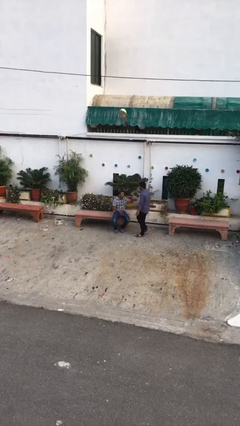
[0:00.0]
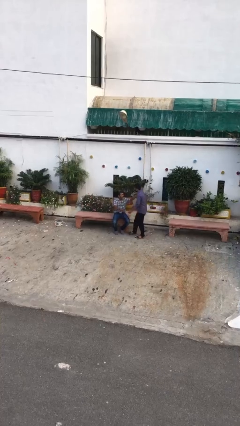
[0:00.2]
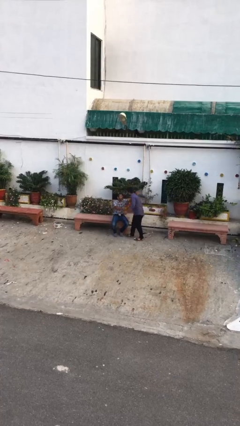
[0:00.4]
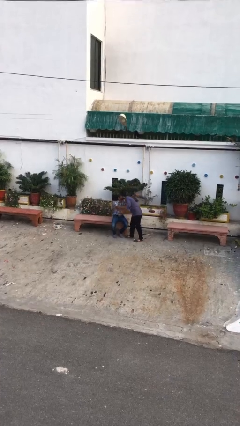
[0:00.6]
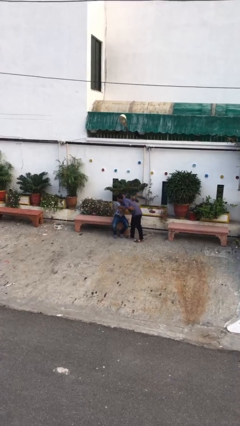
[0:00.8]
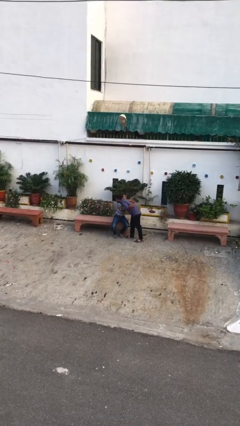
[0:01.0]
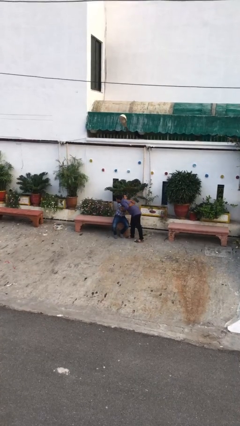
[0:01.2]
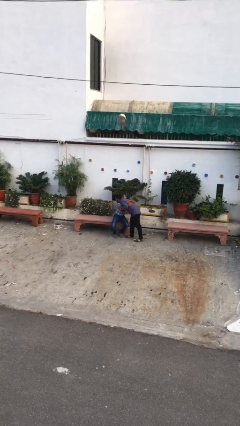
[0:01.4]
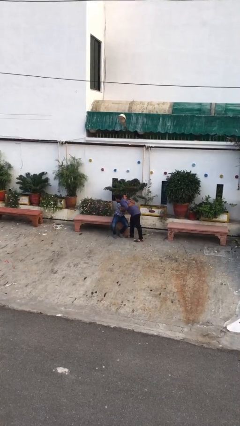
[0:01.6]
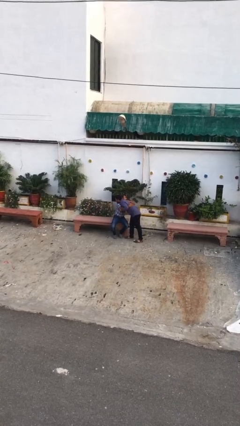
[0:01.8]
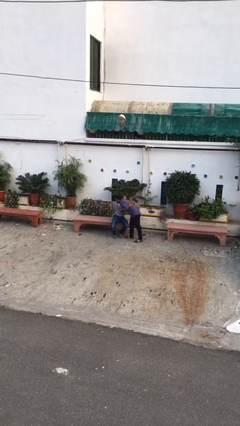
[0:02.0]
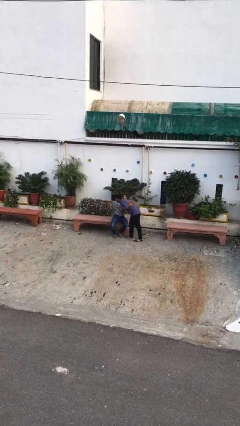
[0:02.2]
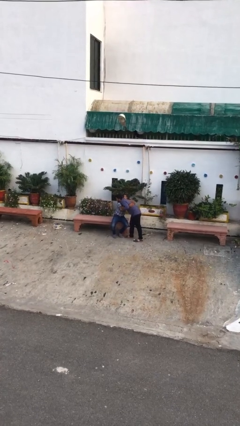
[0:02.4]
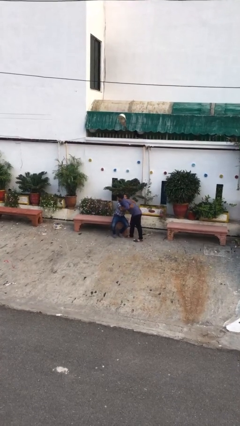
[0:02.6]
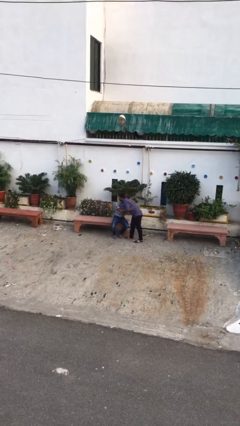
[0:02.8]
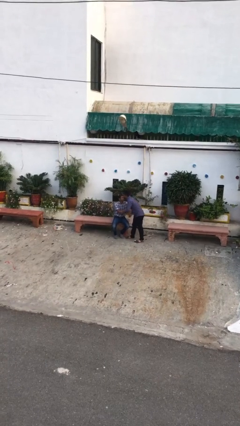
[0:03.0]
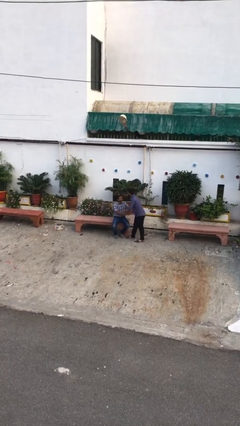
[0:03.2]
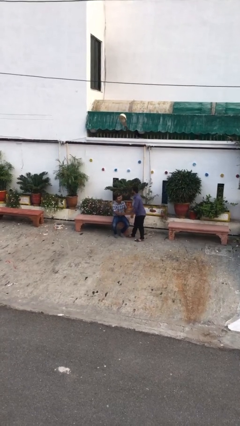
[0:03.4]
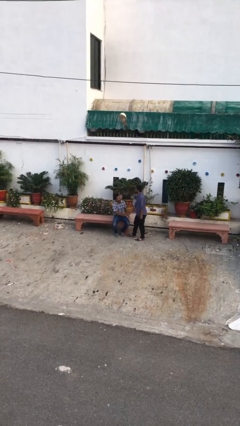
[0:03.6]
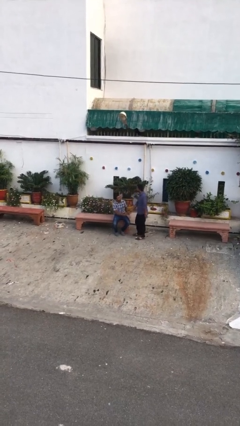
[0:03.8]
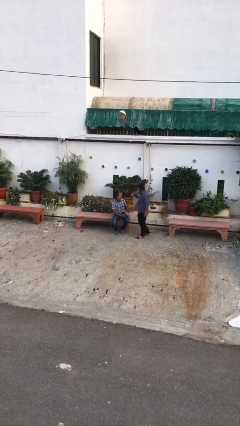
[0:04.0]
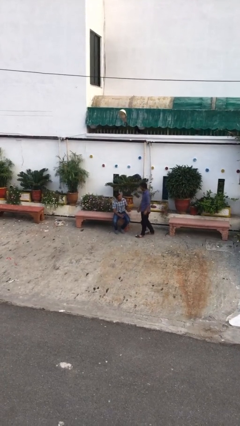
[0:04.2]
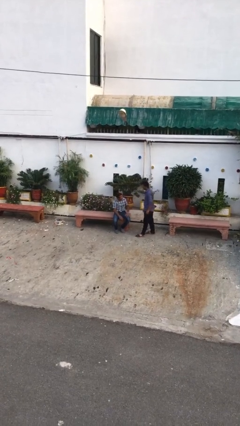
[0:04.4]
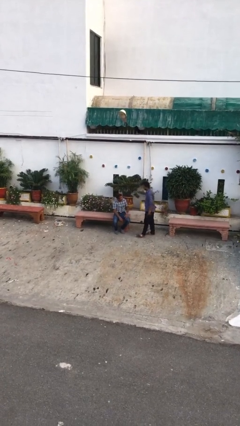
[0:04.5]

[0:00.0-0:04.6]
person embraces person

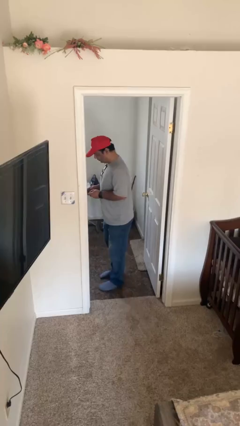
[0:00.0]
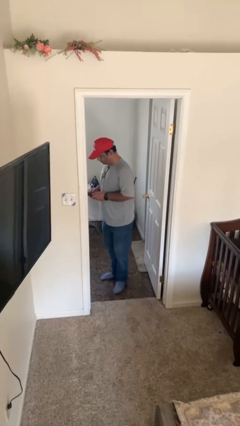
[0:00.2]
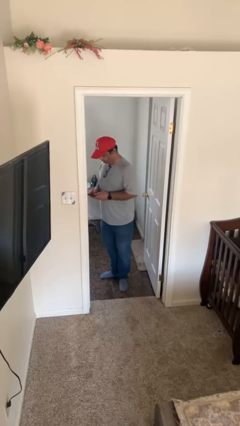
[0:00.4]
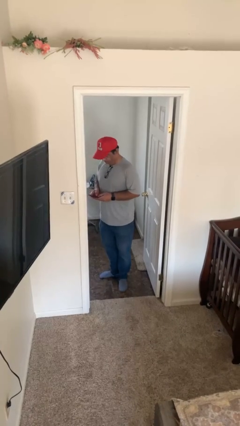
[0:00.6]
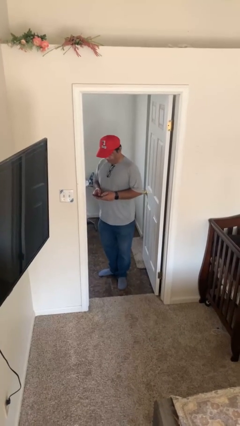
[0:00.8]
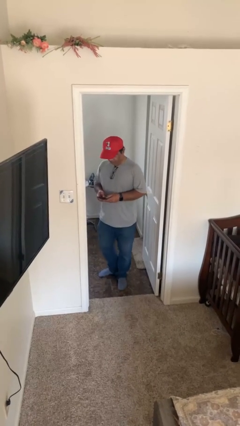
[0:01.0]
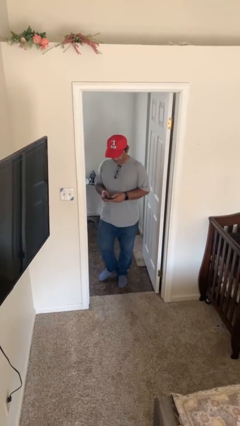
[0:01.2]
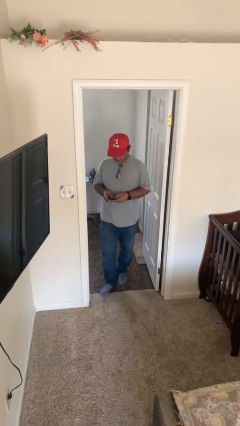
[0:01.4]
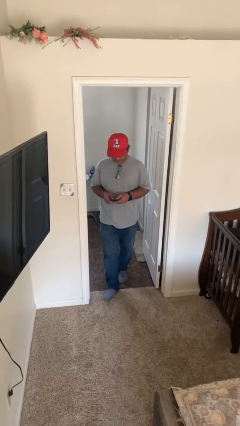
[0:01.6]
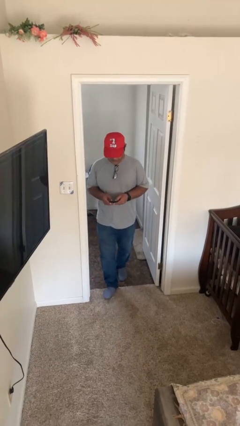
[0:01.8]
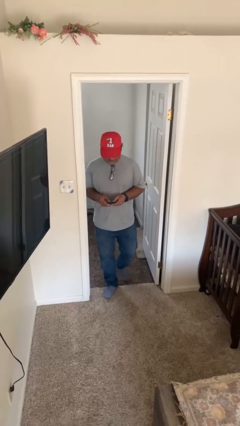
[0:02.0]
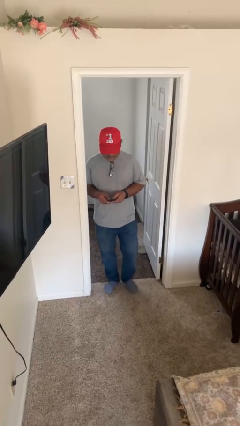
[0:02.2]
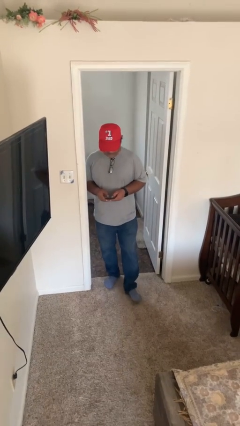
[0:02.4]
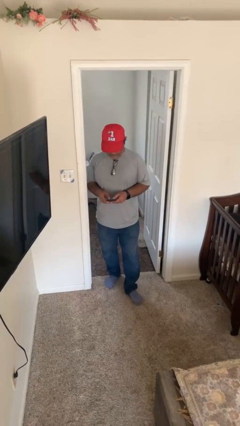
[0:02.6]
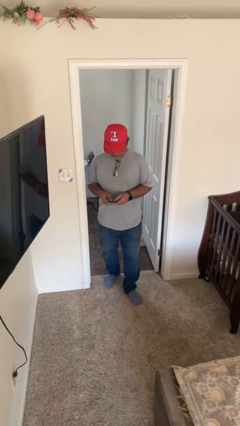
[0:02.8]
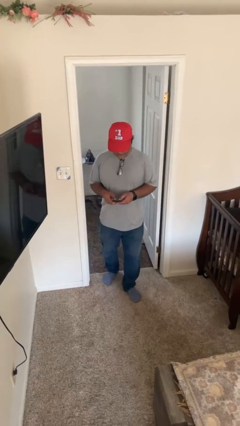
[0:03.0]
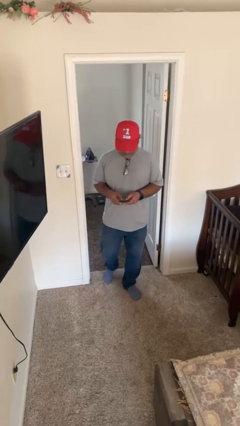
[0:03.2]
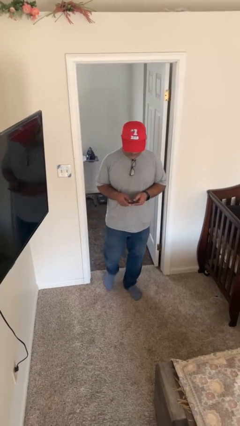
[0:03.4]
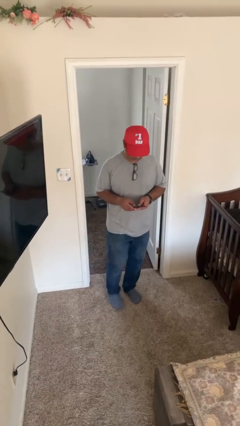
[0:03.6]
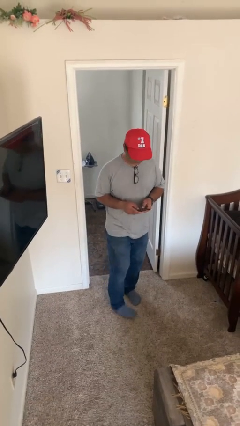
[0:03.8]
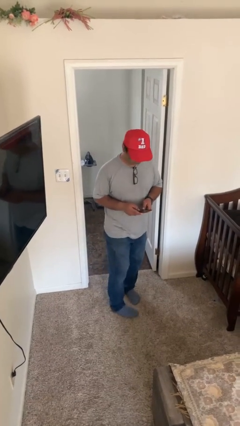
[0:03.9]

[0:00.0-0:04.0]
person enters scene through structure

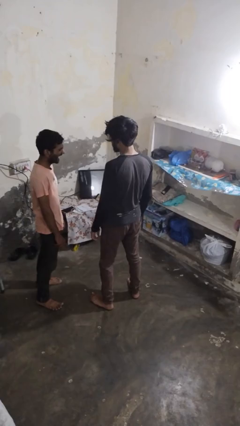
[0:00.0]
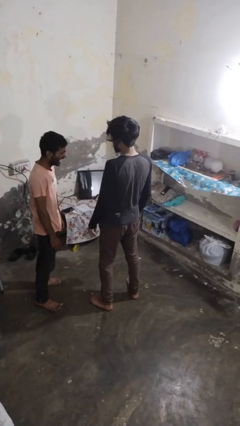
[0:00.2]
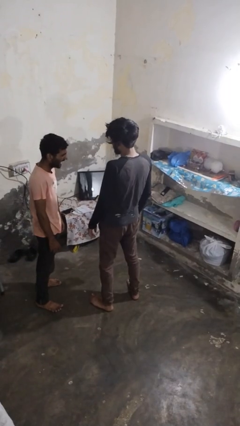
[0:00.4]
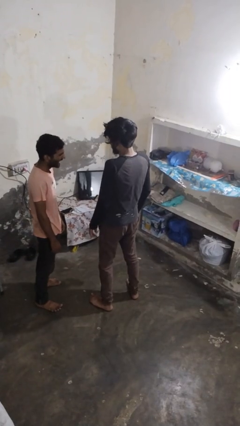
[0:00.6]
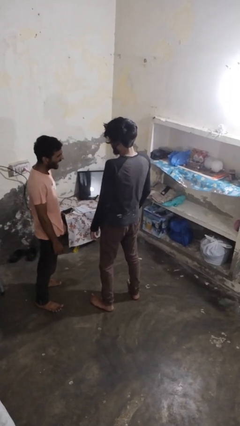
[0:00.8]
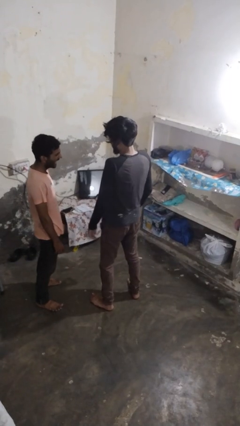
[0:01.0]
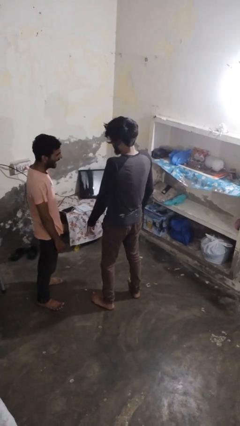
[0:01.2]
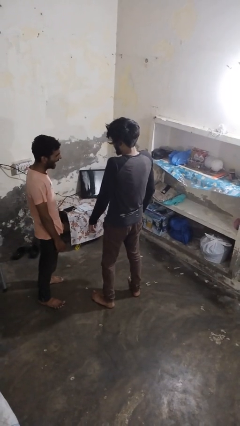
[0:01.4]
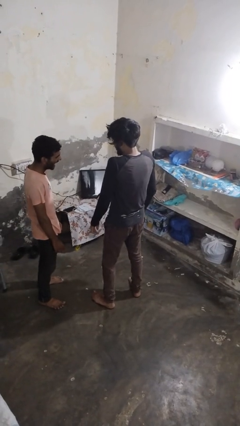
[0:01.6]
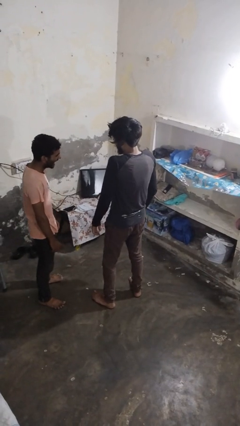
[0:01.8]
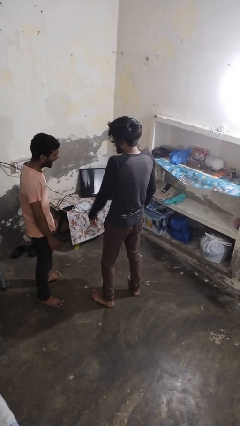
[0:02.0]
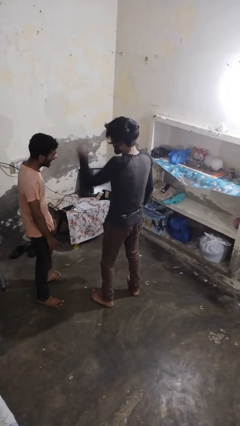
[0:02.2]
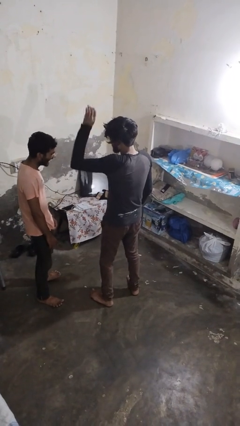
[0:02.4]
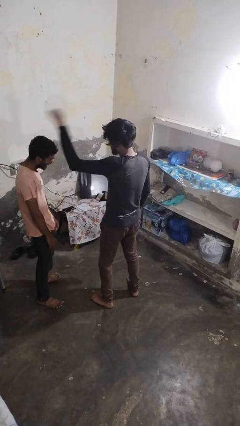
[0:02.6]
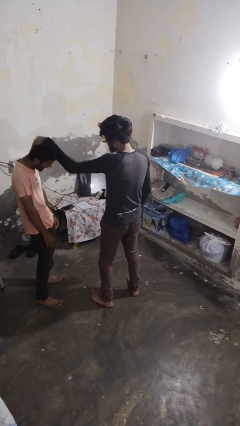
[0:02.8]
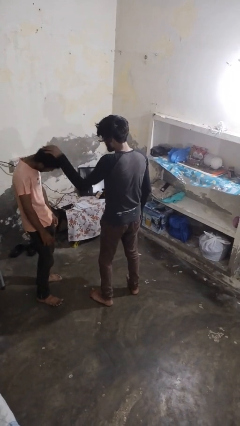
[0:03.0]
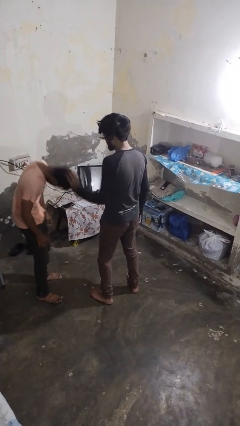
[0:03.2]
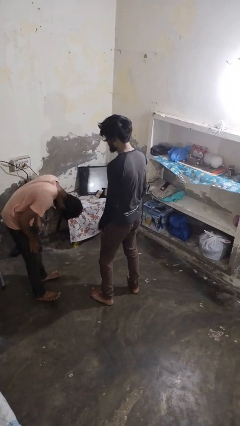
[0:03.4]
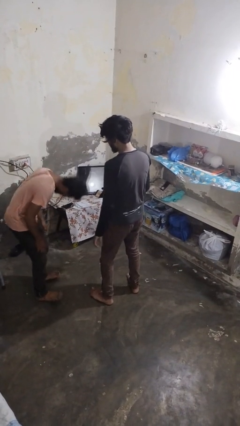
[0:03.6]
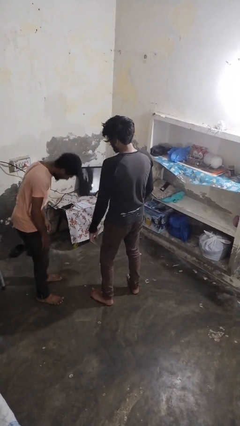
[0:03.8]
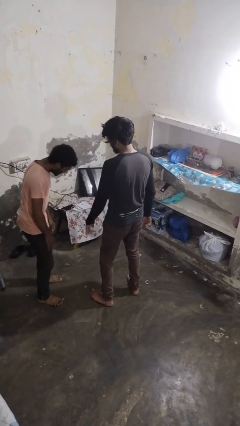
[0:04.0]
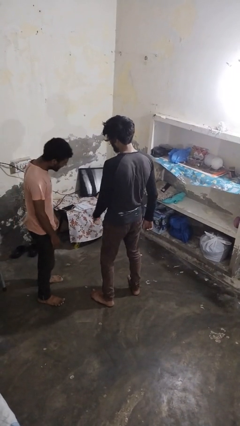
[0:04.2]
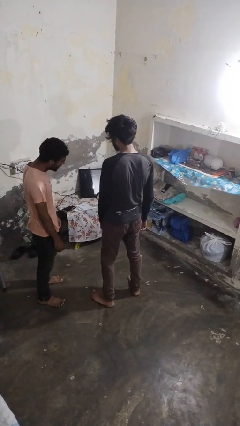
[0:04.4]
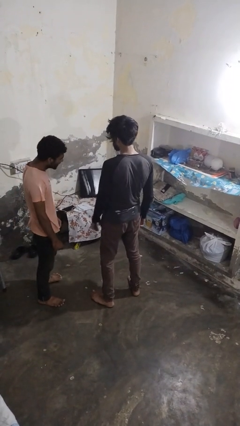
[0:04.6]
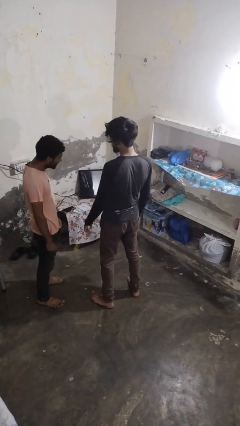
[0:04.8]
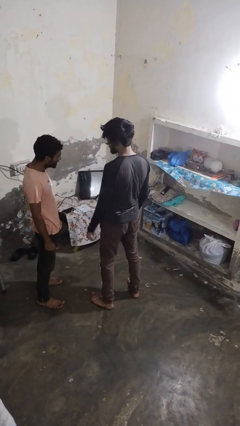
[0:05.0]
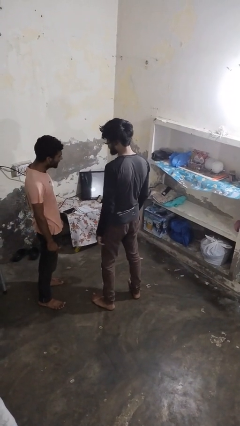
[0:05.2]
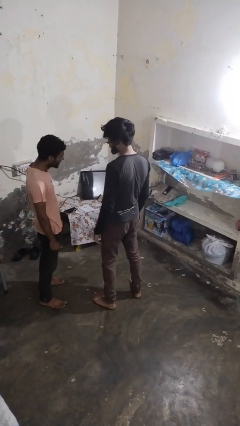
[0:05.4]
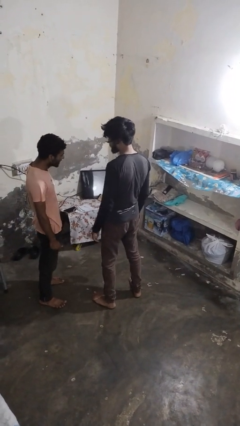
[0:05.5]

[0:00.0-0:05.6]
person laughs with person

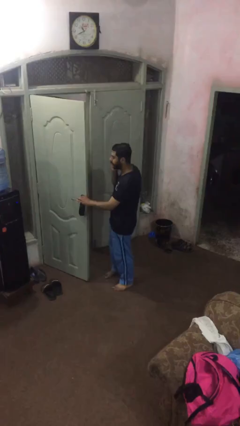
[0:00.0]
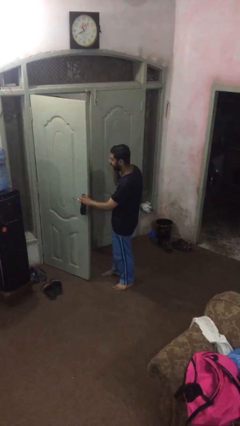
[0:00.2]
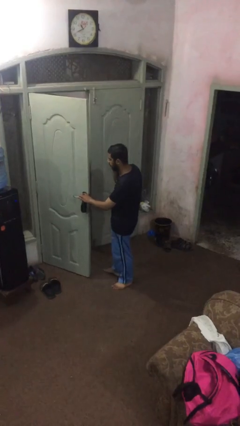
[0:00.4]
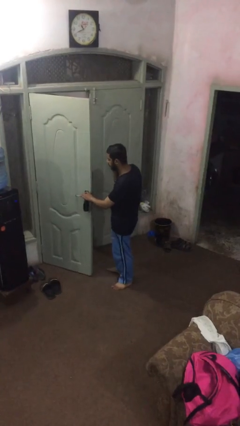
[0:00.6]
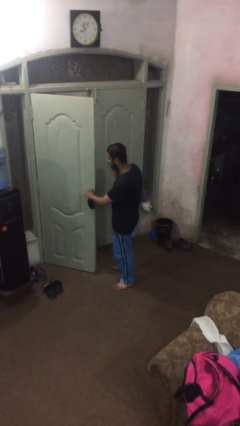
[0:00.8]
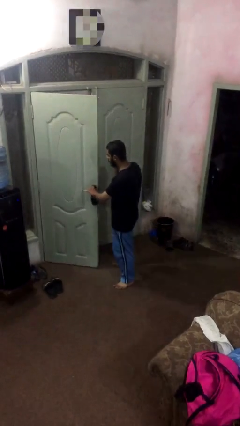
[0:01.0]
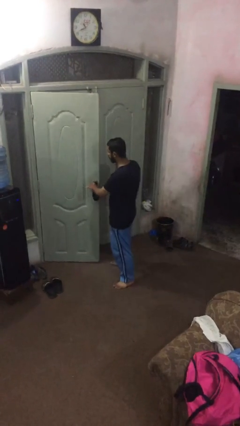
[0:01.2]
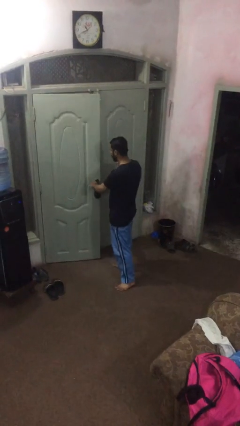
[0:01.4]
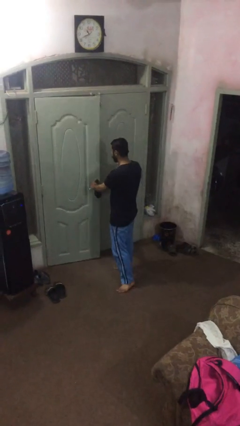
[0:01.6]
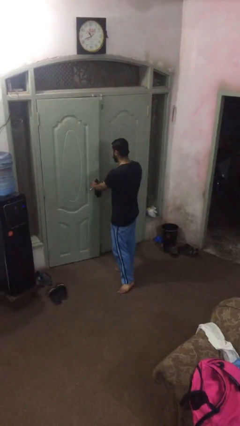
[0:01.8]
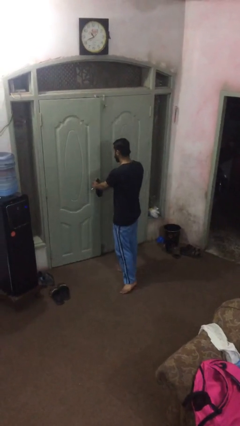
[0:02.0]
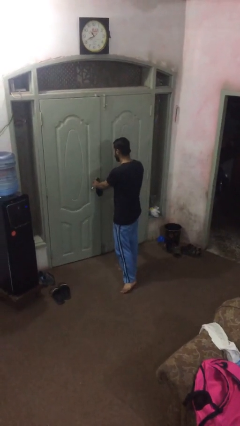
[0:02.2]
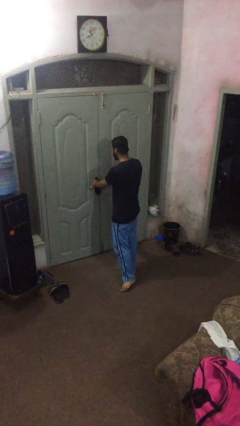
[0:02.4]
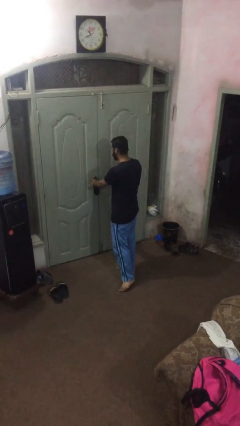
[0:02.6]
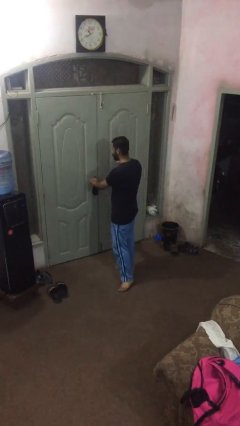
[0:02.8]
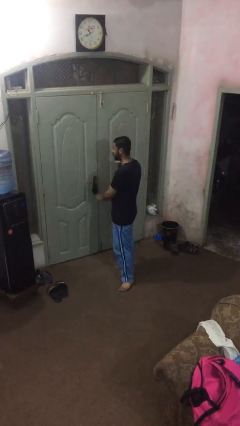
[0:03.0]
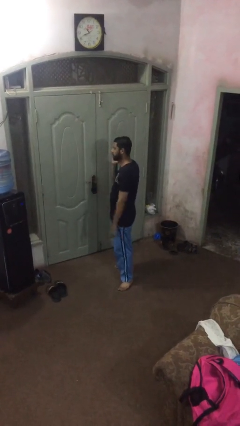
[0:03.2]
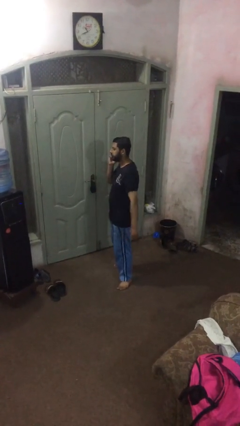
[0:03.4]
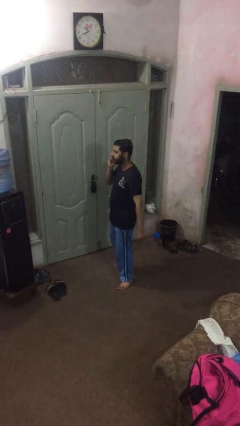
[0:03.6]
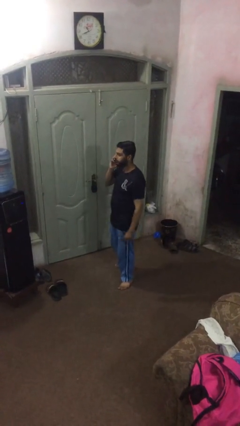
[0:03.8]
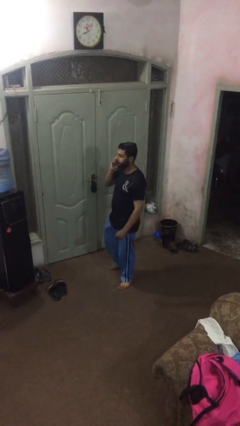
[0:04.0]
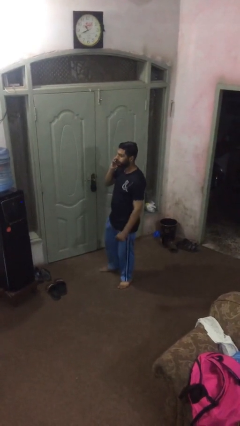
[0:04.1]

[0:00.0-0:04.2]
person closes facility door
